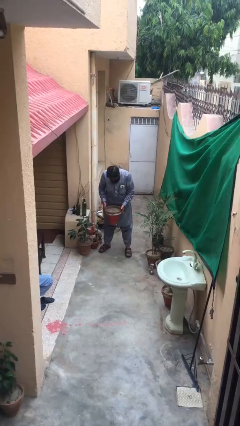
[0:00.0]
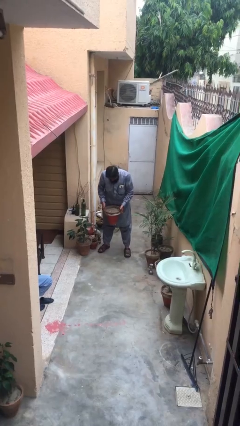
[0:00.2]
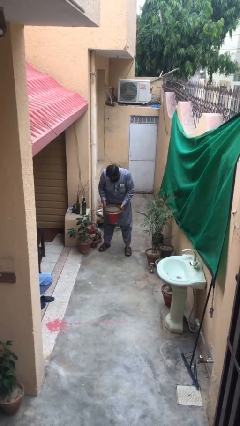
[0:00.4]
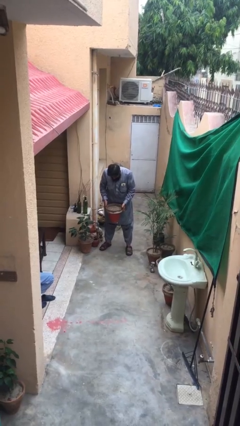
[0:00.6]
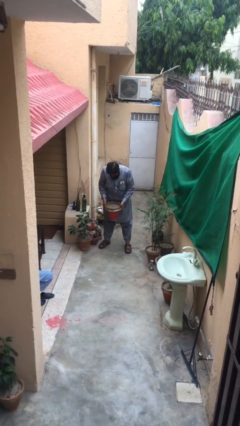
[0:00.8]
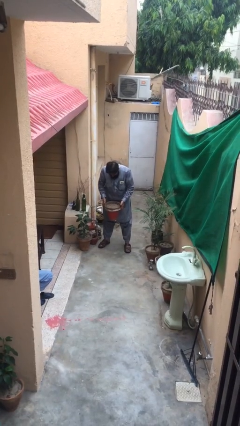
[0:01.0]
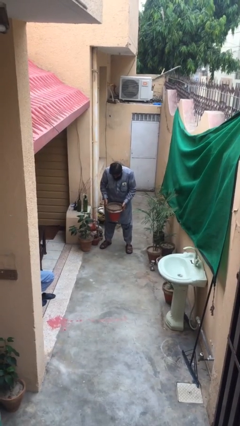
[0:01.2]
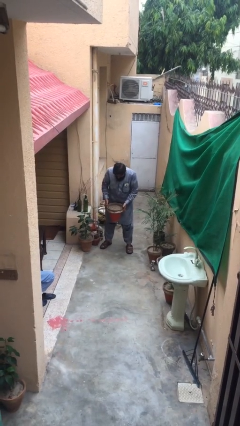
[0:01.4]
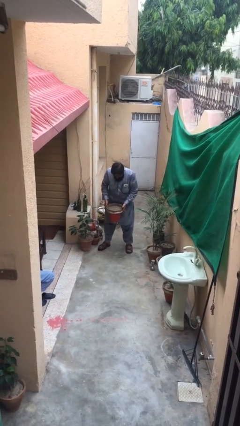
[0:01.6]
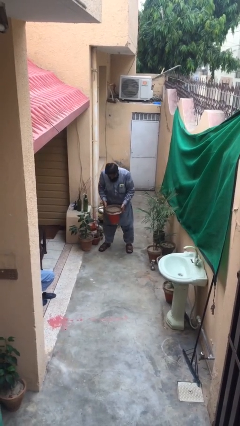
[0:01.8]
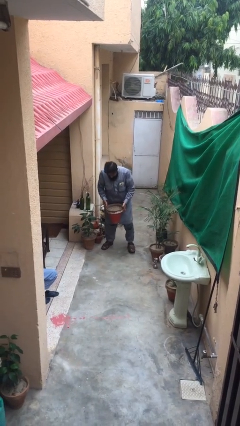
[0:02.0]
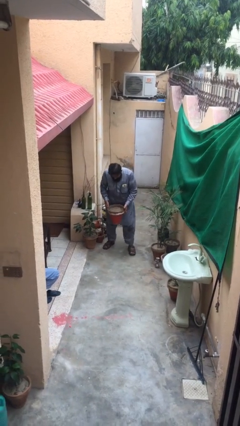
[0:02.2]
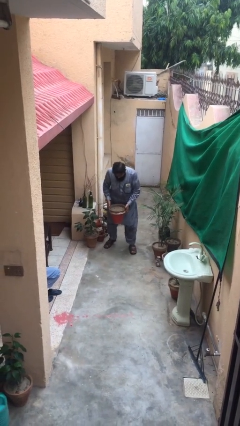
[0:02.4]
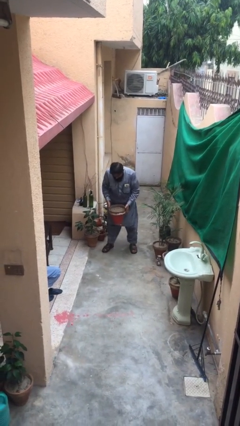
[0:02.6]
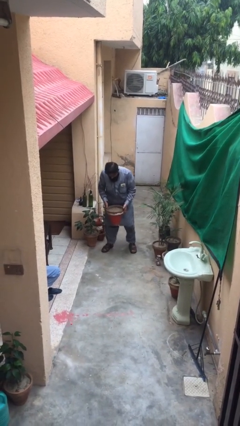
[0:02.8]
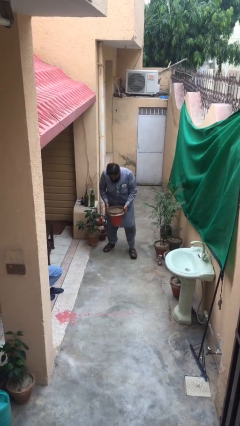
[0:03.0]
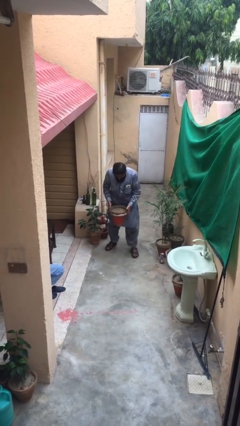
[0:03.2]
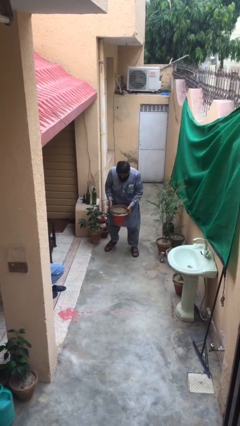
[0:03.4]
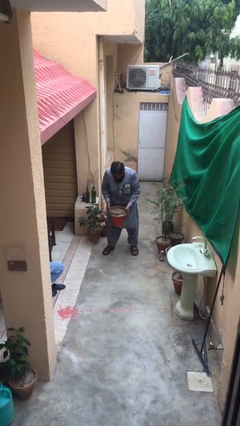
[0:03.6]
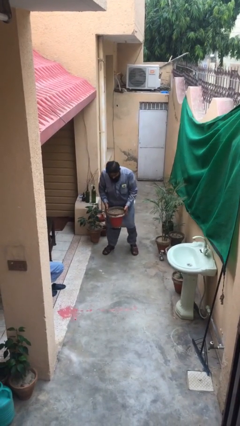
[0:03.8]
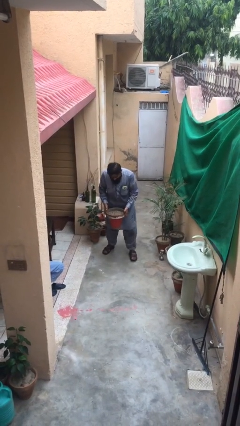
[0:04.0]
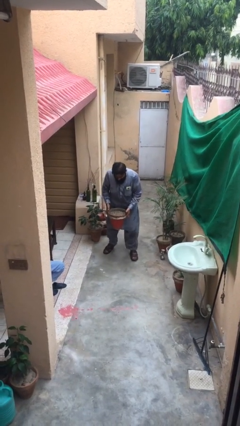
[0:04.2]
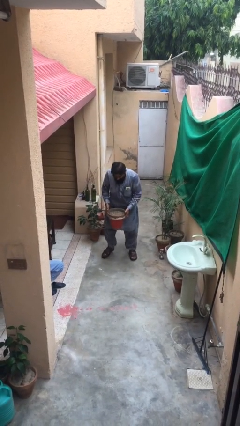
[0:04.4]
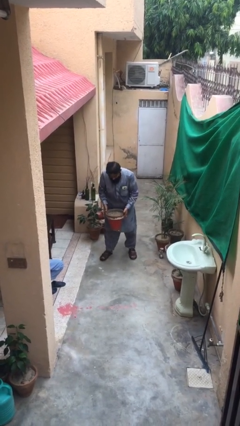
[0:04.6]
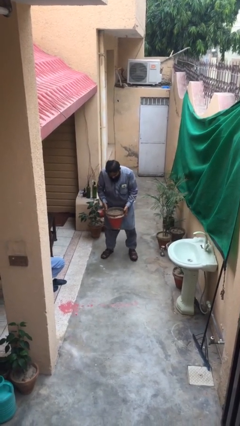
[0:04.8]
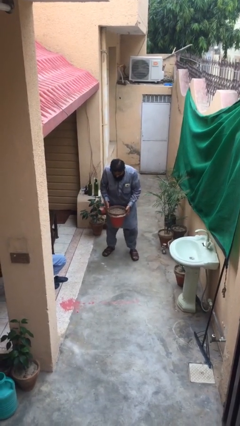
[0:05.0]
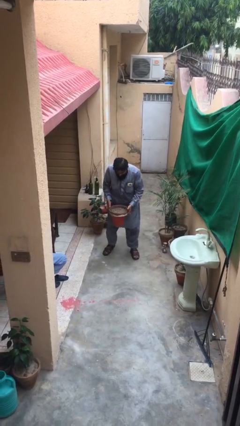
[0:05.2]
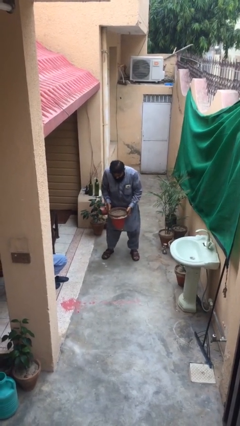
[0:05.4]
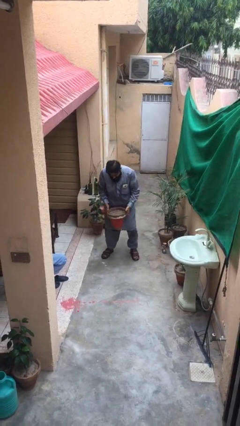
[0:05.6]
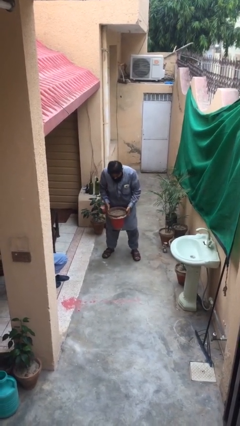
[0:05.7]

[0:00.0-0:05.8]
person carries heavy object

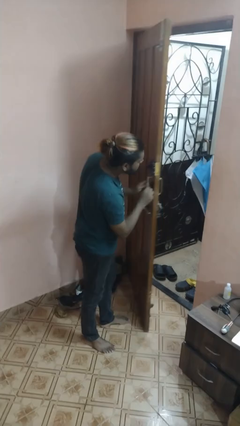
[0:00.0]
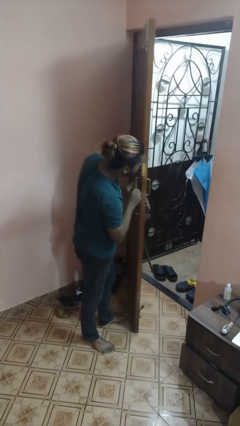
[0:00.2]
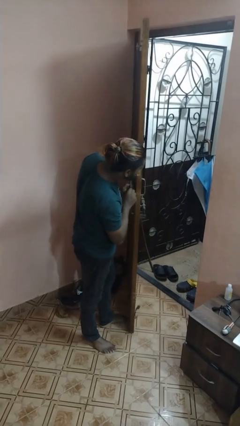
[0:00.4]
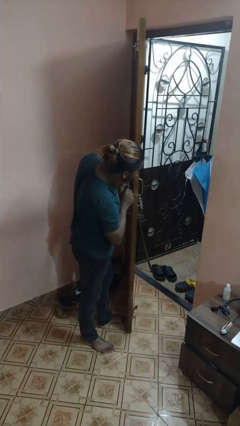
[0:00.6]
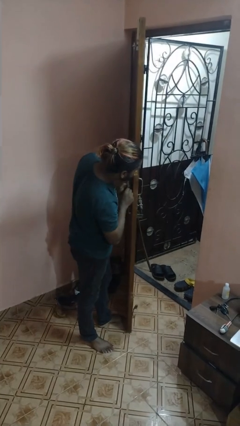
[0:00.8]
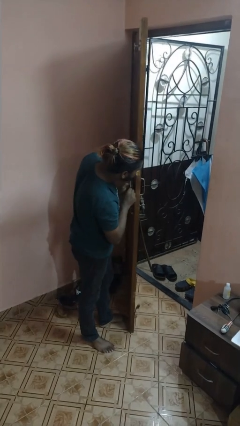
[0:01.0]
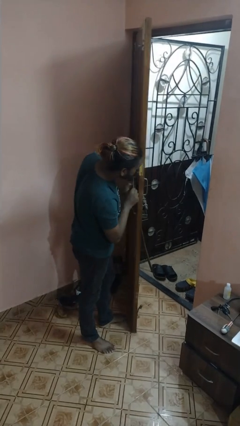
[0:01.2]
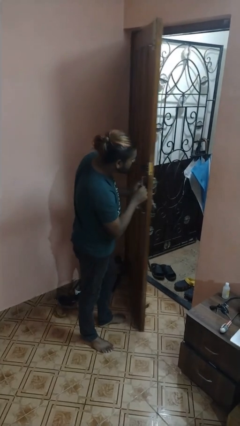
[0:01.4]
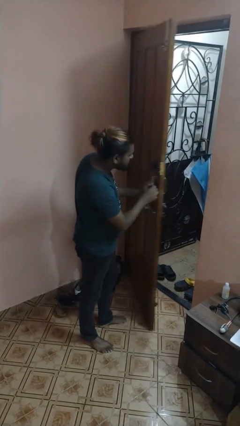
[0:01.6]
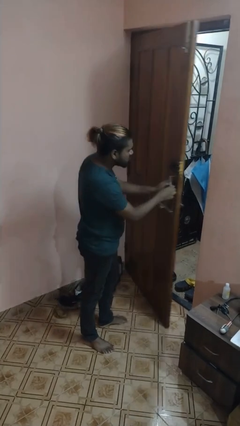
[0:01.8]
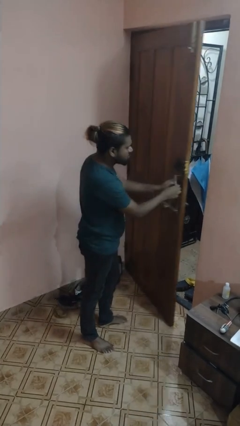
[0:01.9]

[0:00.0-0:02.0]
person opens facility door

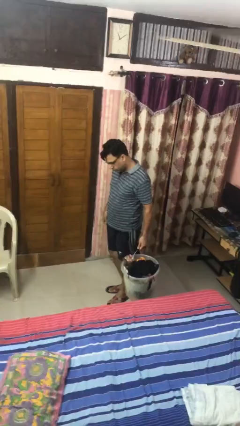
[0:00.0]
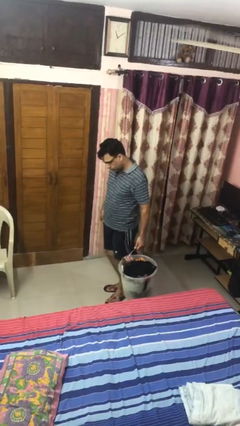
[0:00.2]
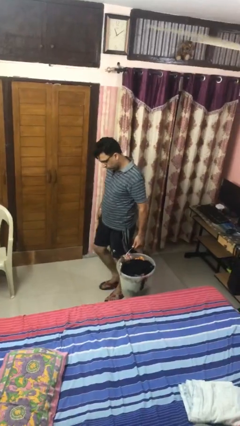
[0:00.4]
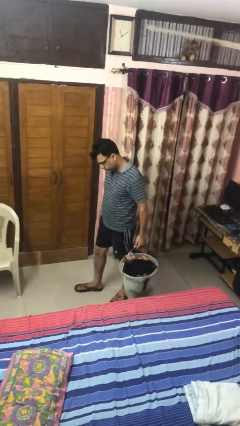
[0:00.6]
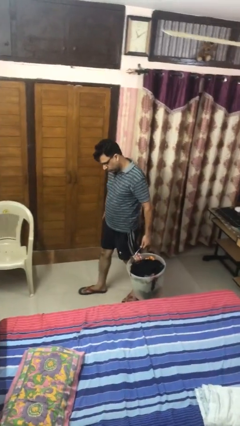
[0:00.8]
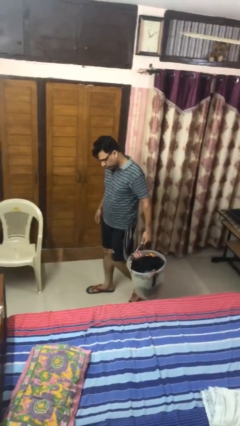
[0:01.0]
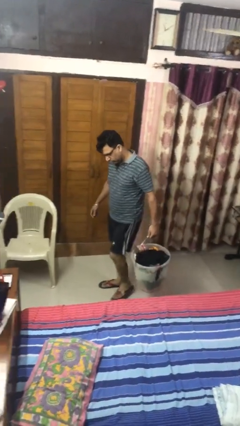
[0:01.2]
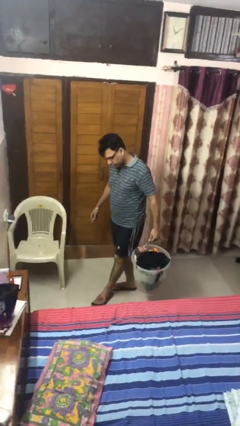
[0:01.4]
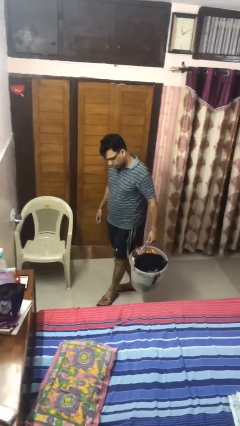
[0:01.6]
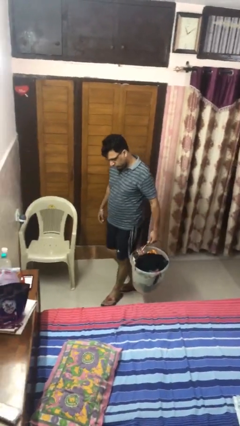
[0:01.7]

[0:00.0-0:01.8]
person carries laundry basket

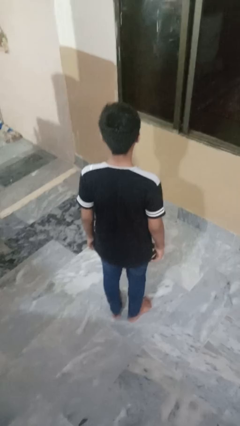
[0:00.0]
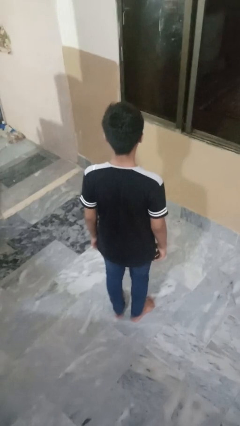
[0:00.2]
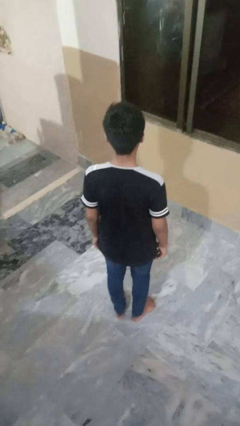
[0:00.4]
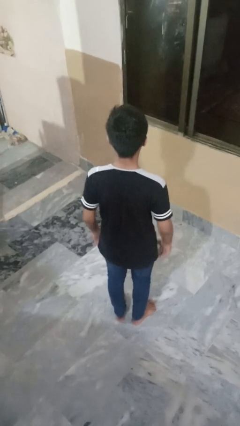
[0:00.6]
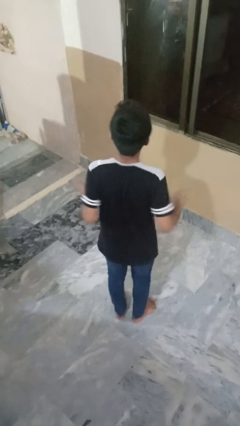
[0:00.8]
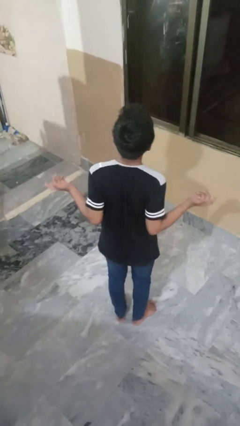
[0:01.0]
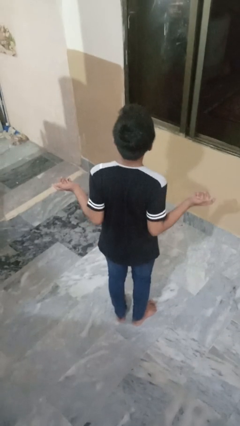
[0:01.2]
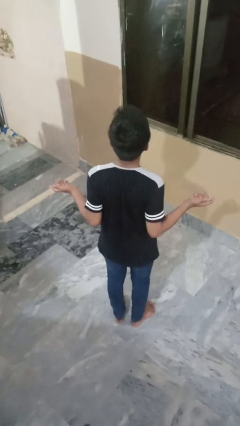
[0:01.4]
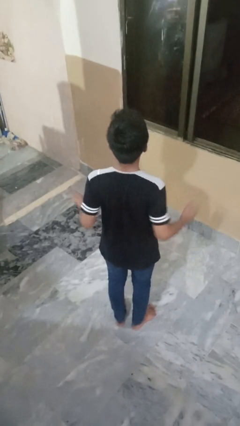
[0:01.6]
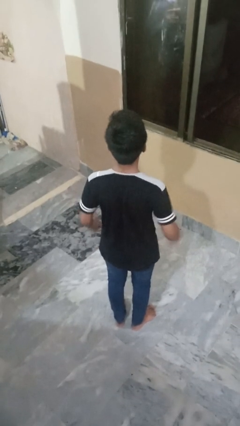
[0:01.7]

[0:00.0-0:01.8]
person shrugs

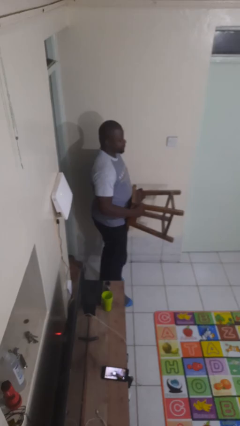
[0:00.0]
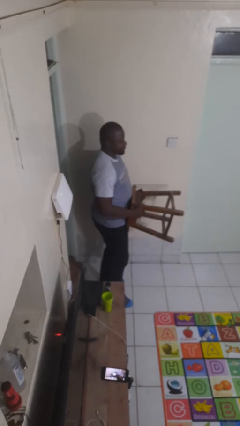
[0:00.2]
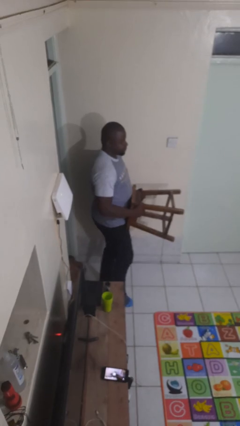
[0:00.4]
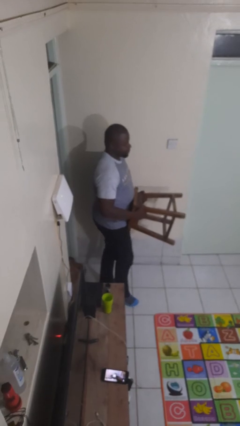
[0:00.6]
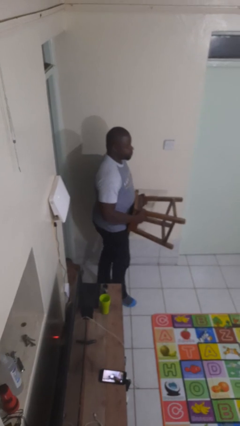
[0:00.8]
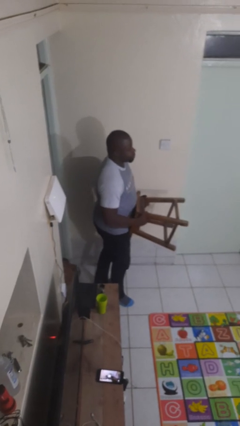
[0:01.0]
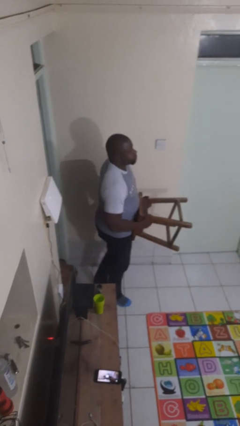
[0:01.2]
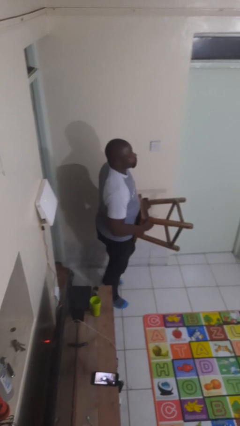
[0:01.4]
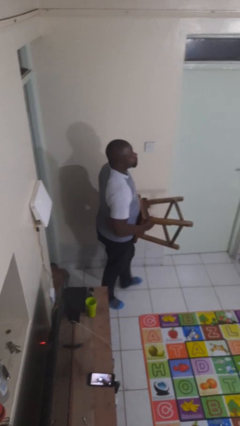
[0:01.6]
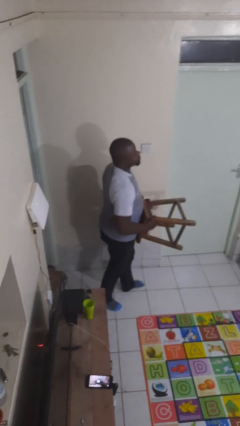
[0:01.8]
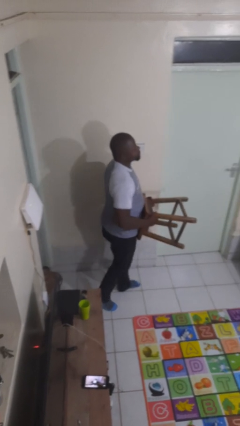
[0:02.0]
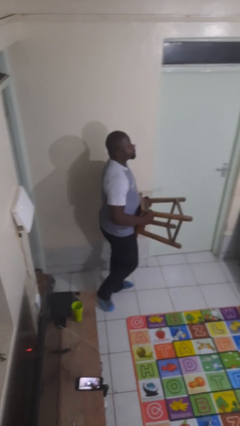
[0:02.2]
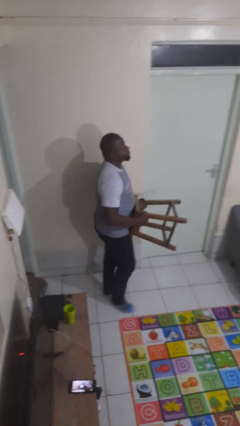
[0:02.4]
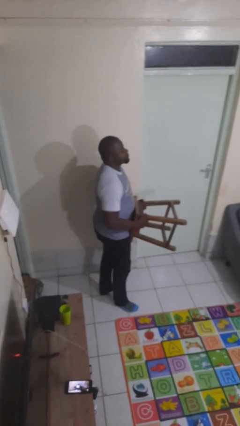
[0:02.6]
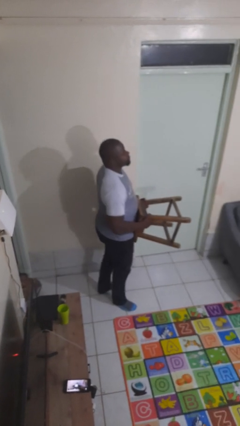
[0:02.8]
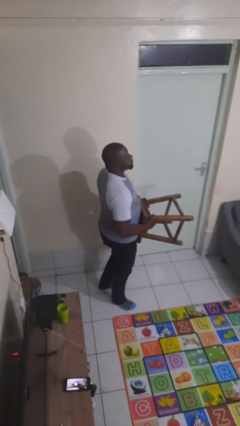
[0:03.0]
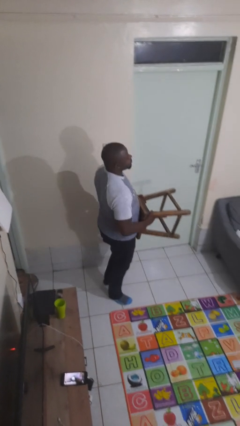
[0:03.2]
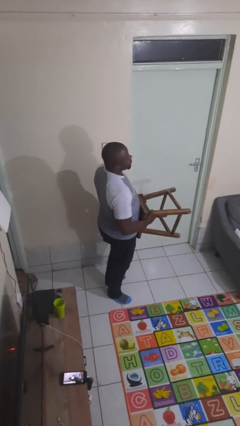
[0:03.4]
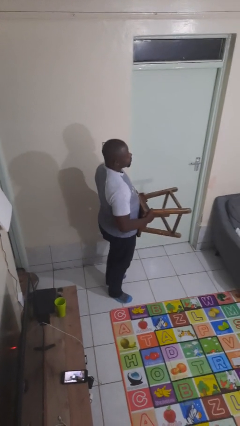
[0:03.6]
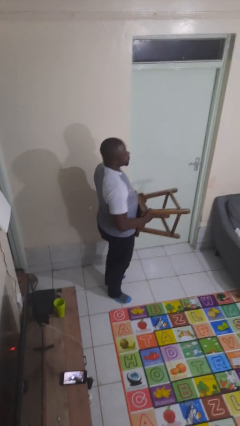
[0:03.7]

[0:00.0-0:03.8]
person carries furniture

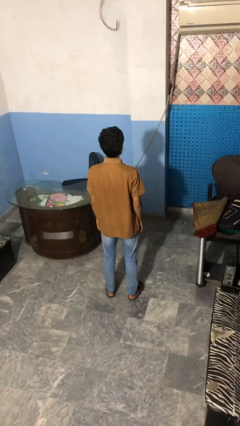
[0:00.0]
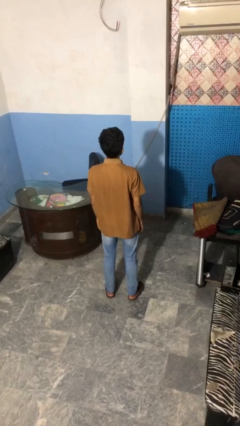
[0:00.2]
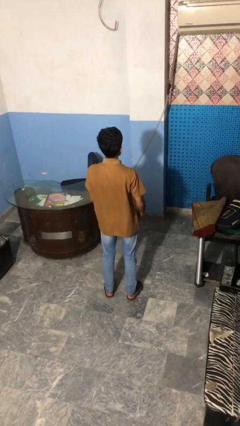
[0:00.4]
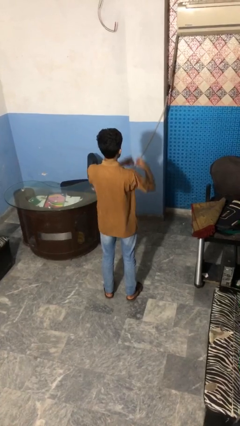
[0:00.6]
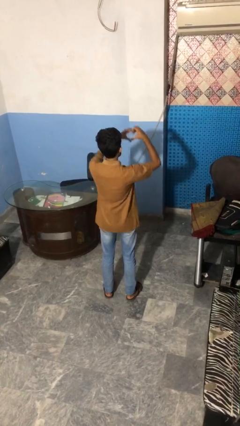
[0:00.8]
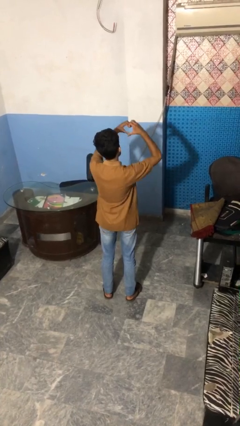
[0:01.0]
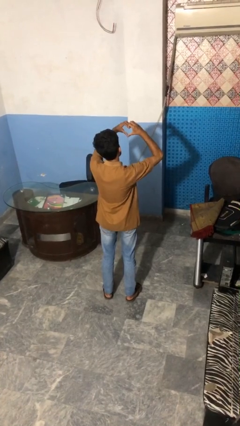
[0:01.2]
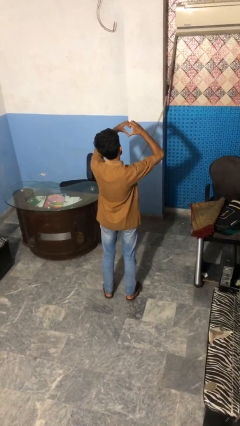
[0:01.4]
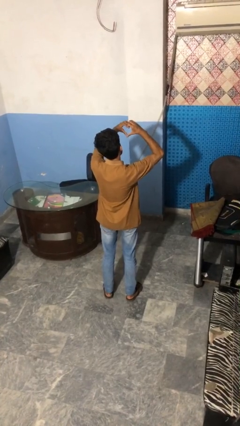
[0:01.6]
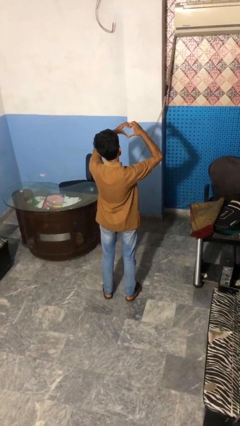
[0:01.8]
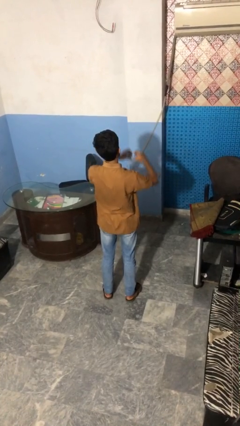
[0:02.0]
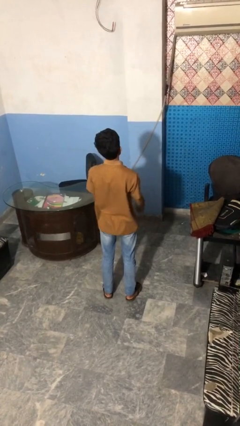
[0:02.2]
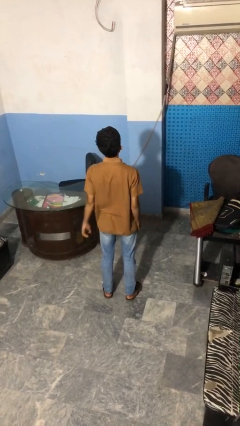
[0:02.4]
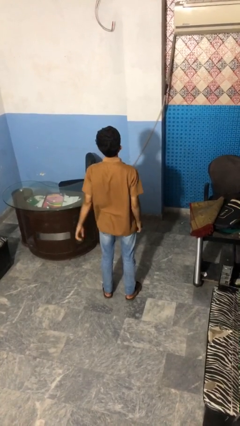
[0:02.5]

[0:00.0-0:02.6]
person gestures heart
